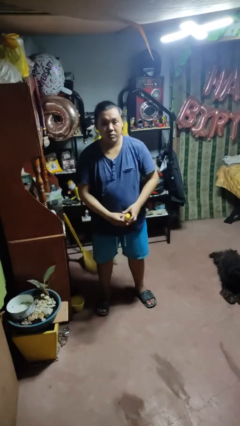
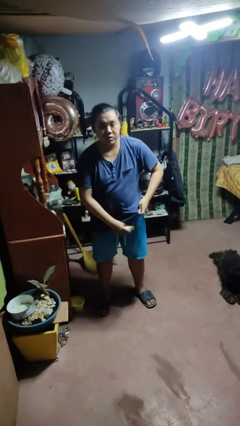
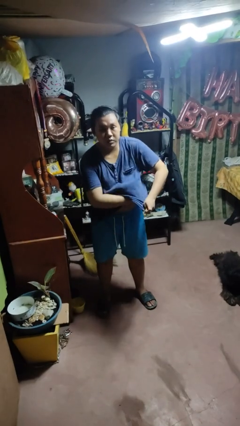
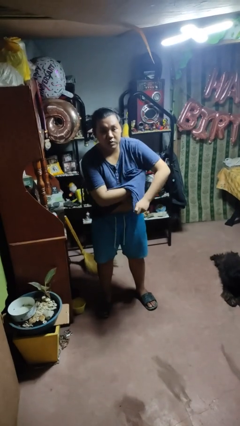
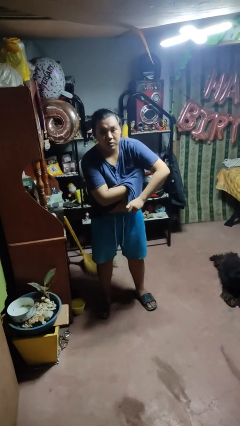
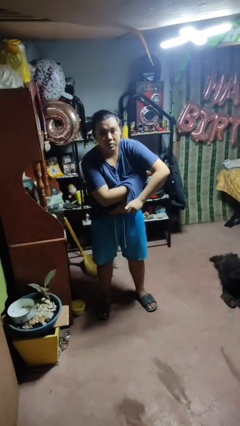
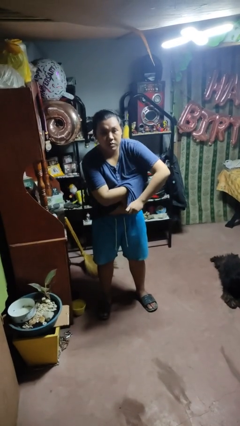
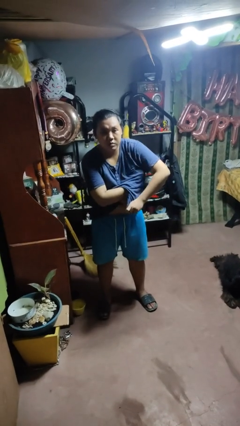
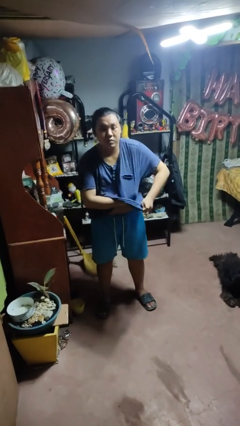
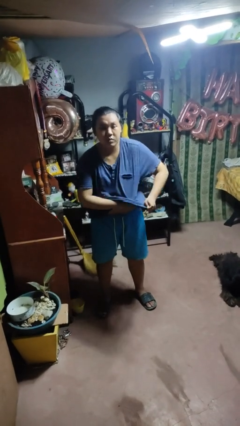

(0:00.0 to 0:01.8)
person applies deodorant

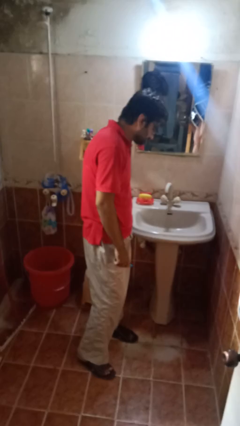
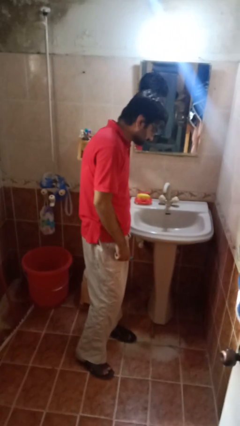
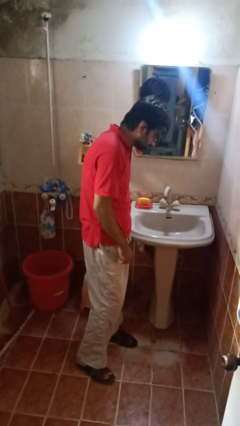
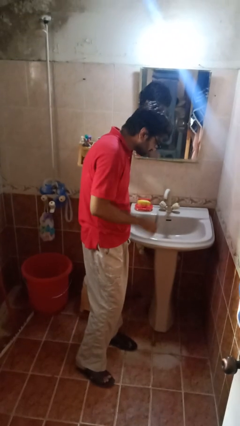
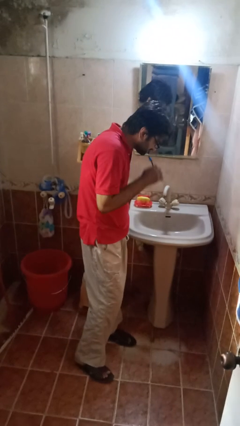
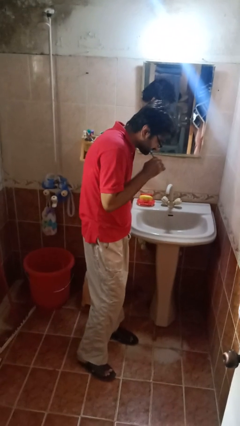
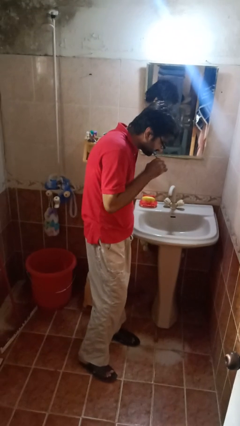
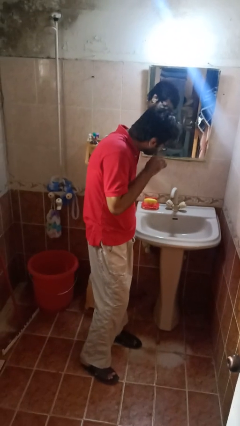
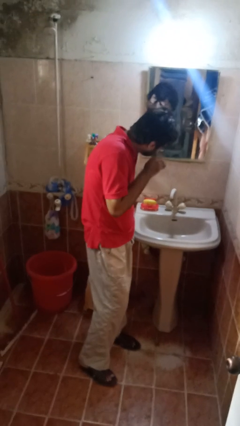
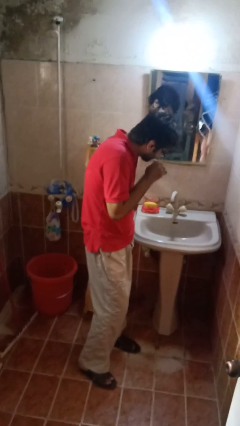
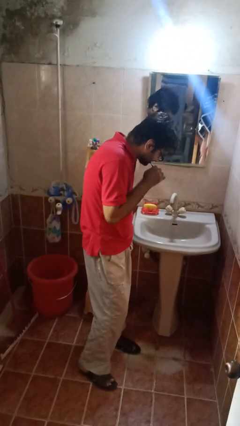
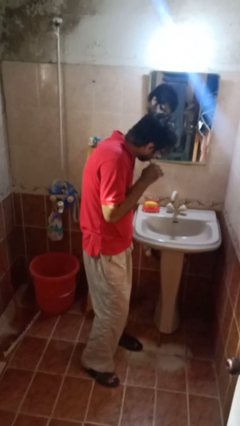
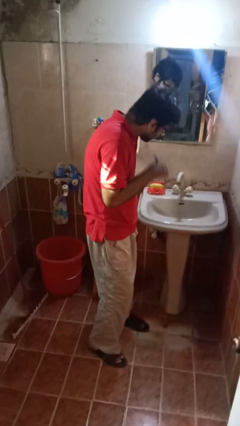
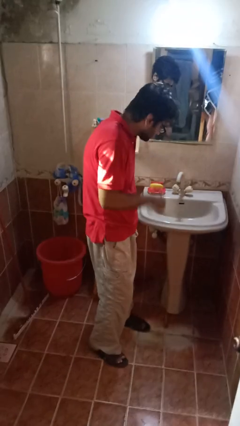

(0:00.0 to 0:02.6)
person brushes teeth

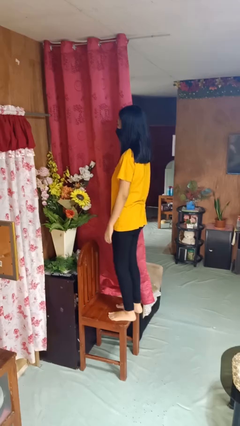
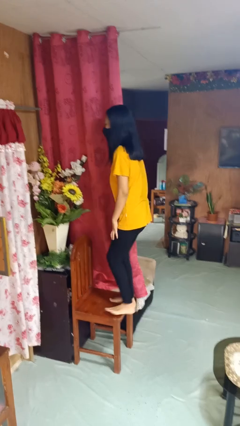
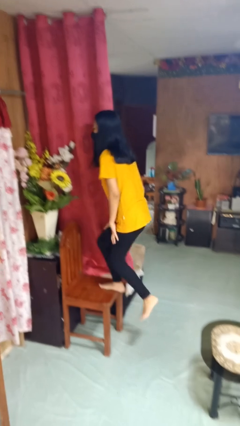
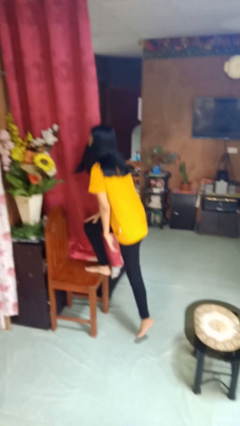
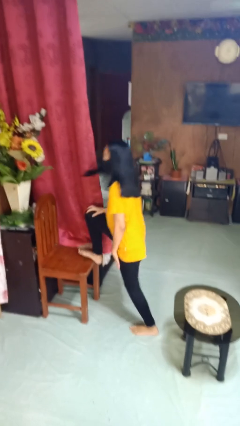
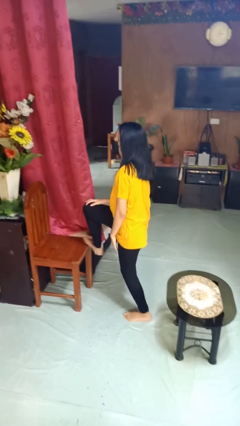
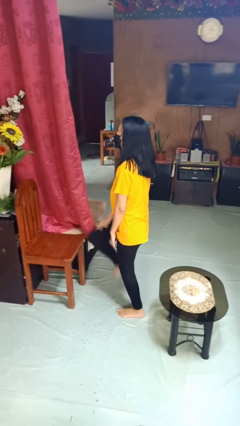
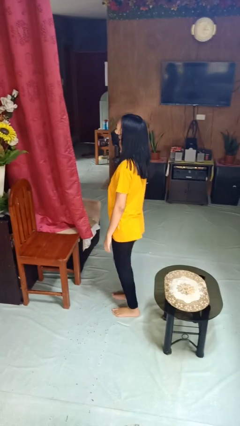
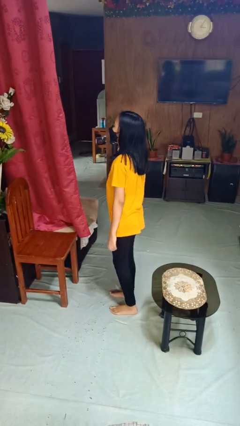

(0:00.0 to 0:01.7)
person climbs off chair

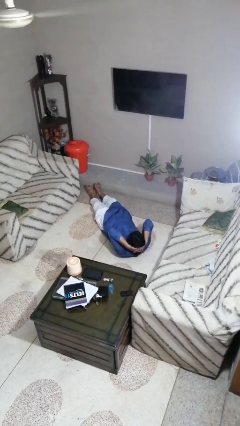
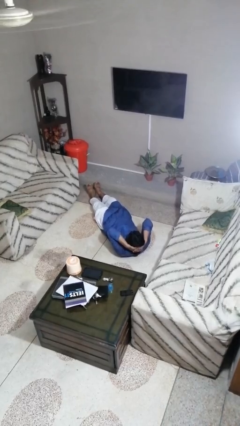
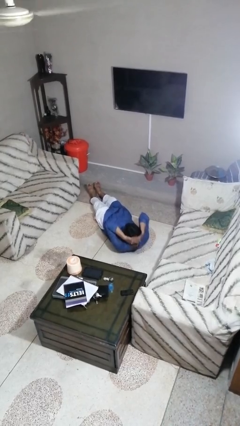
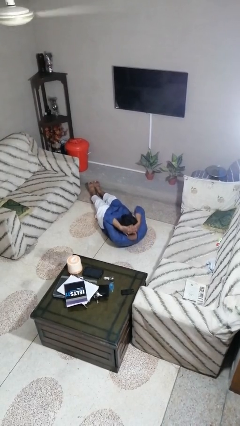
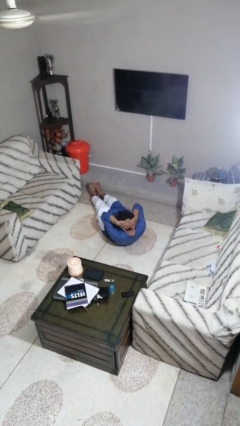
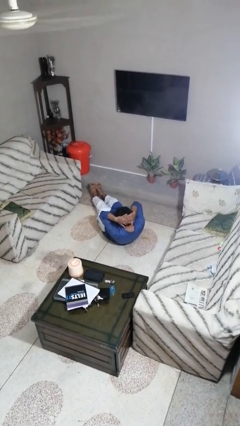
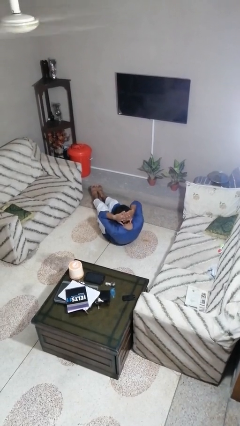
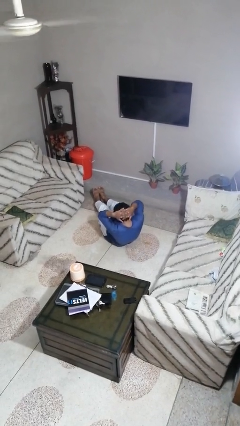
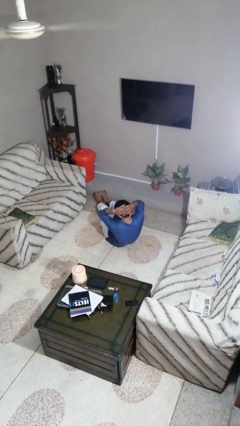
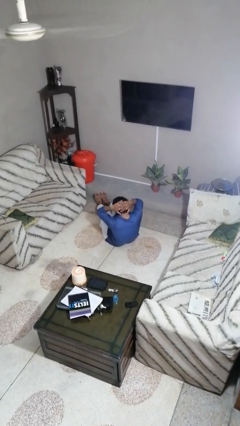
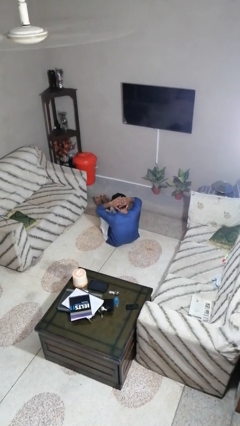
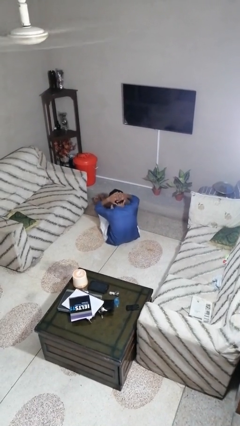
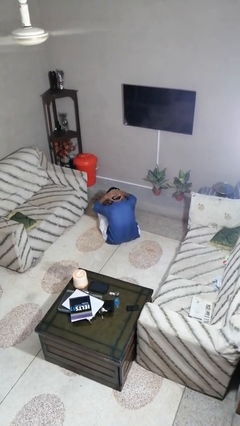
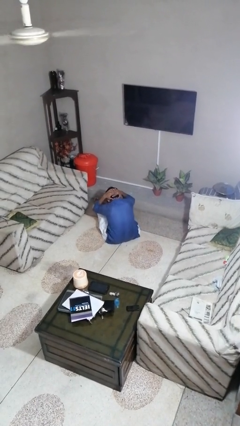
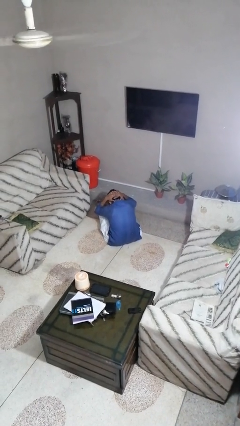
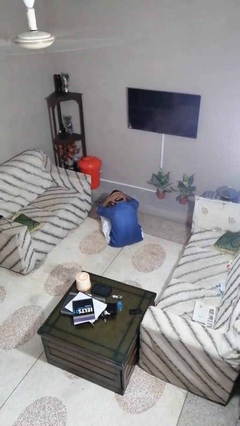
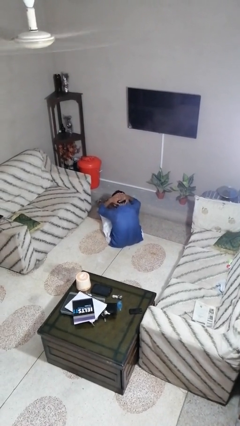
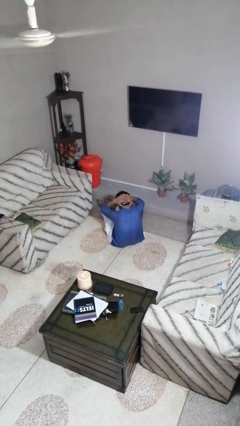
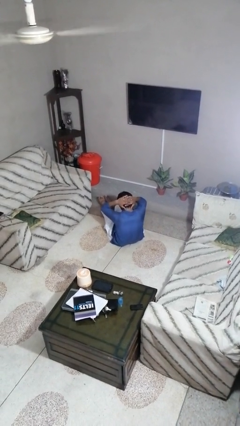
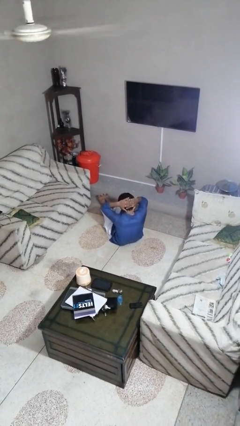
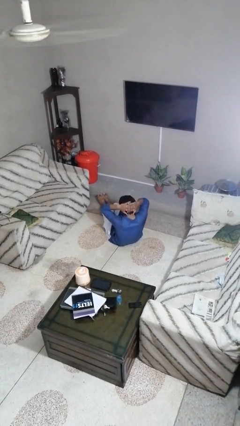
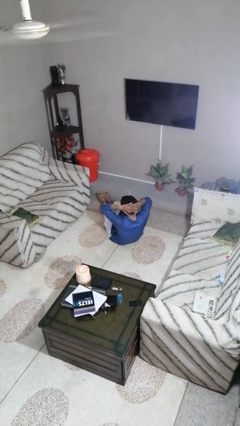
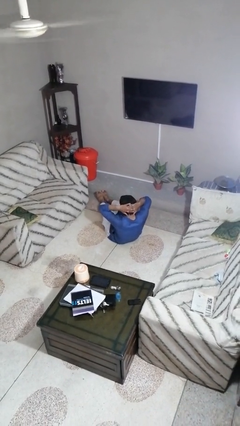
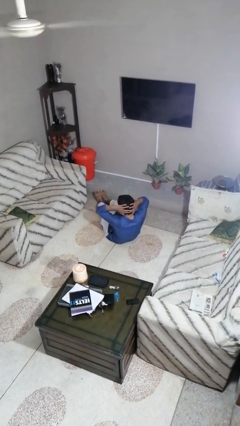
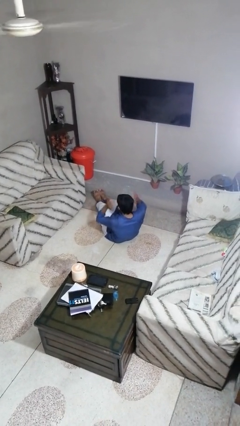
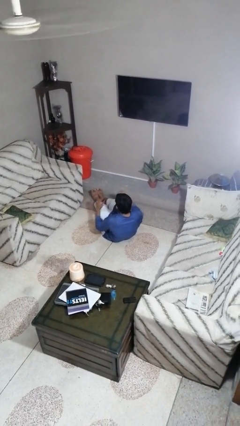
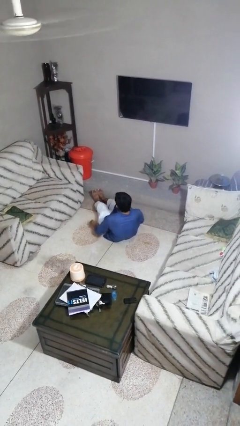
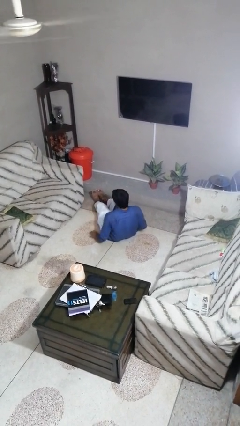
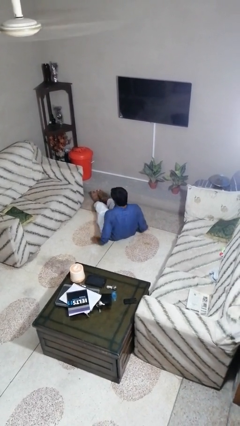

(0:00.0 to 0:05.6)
person exercises with situp

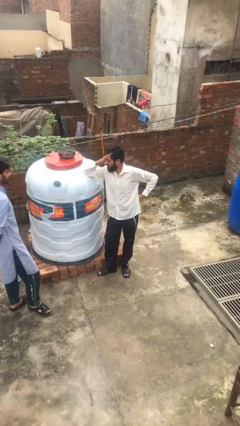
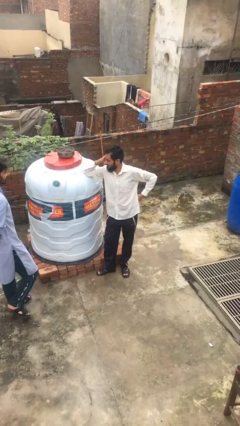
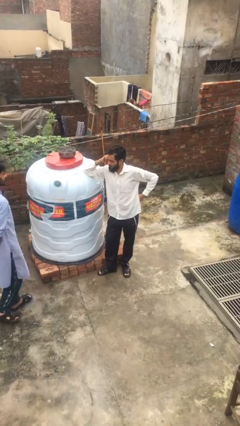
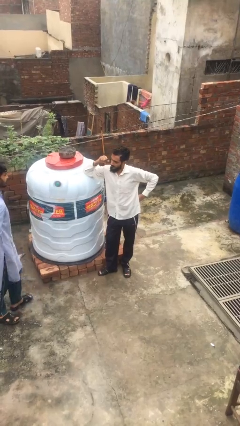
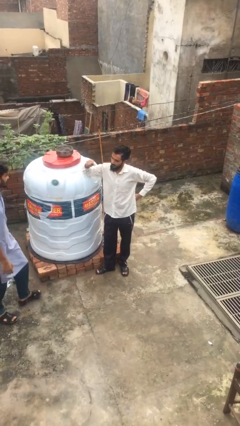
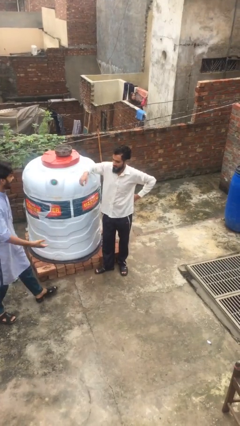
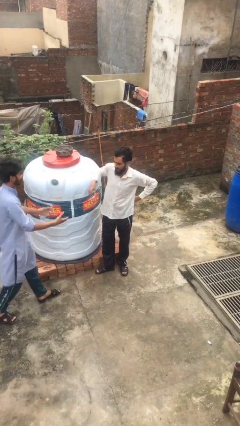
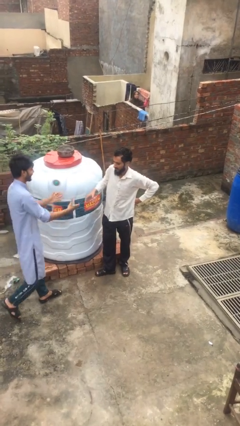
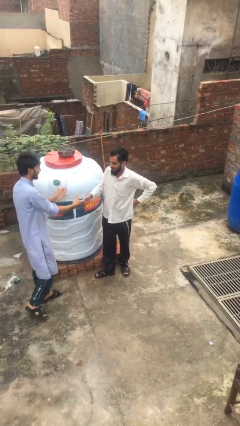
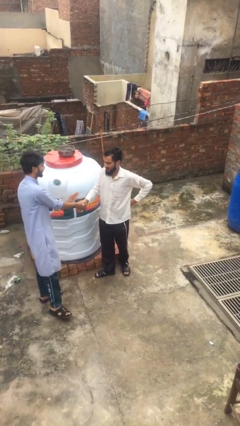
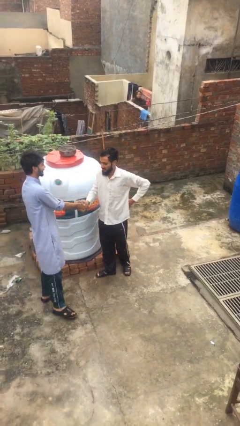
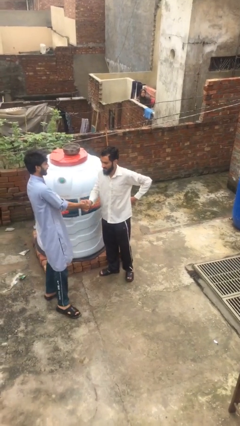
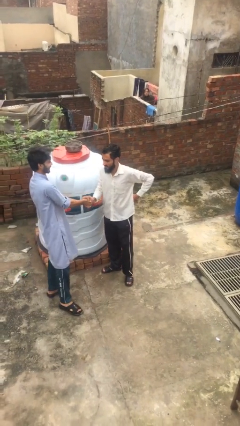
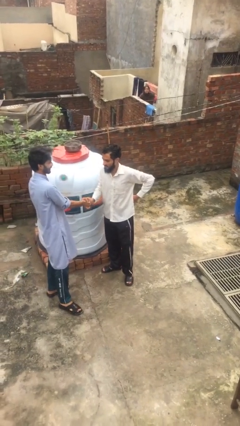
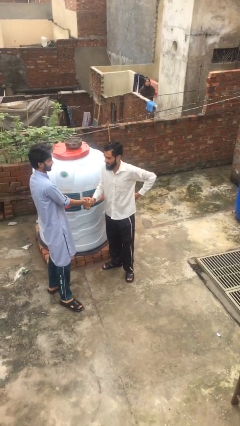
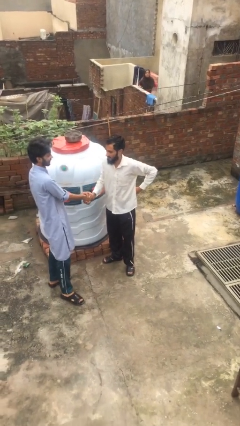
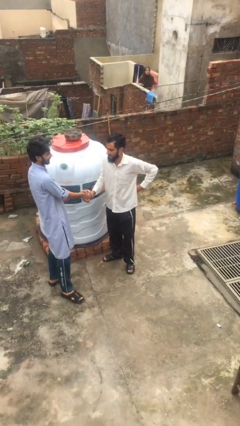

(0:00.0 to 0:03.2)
person shakes hand

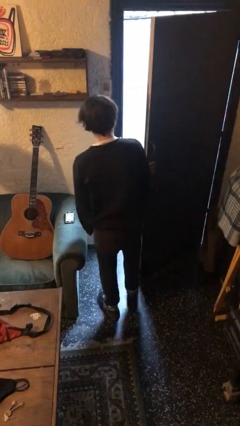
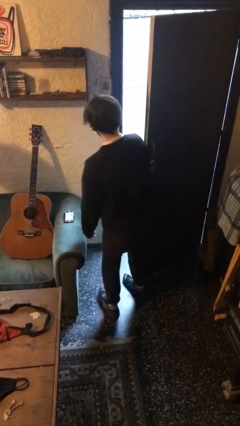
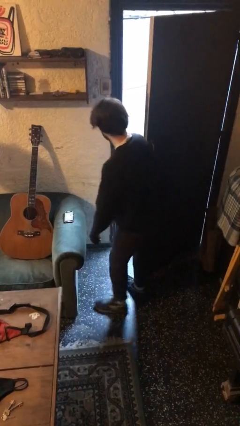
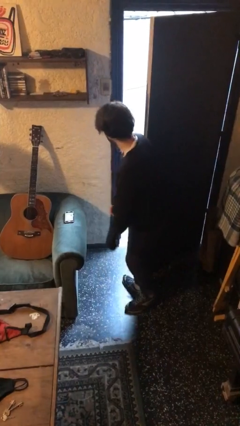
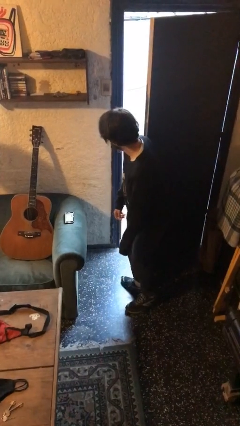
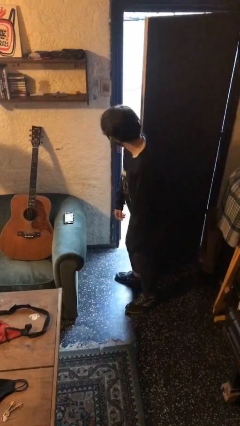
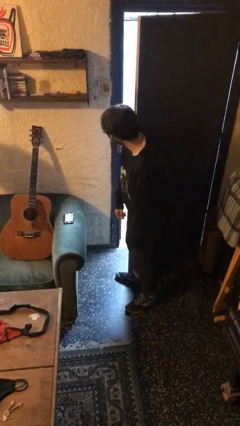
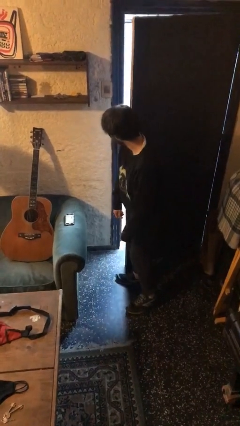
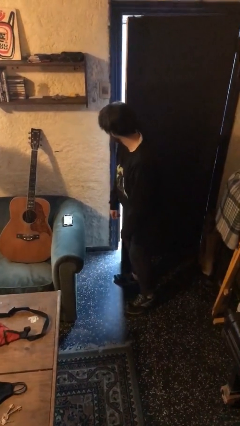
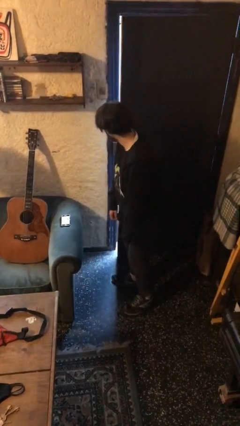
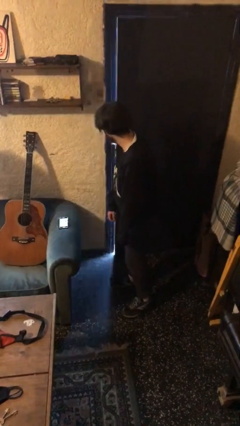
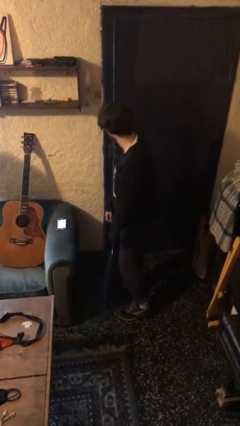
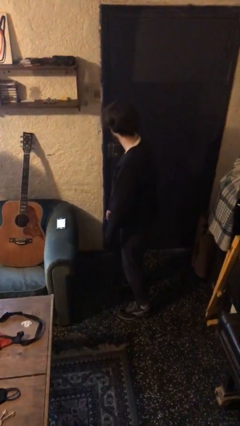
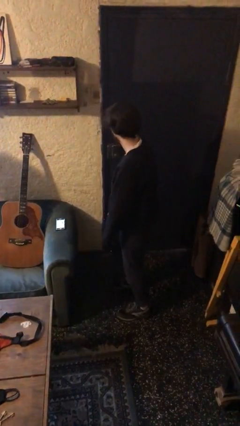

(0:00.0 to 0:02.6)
person closes door with hip
